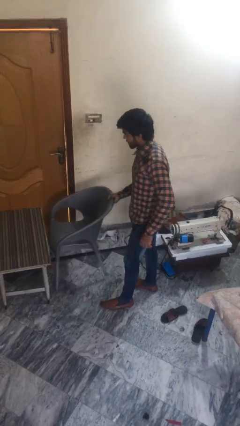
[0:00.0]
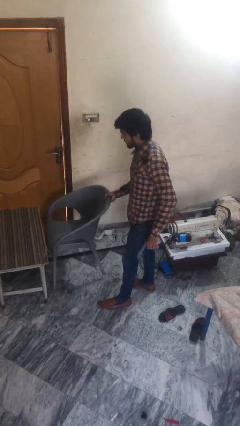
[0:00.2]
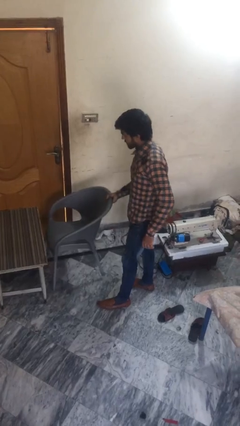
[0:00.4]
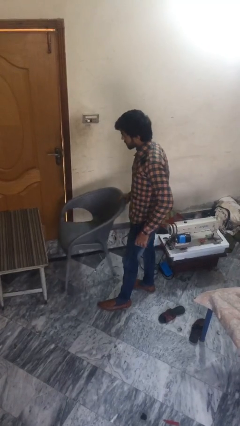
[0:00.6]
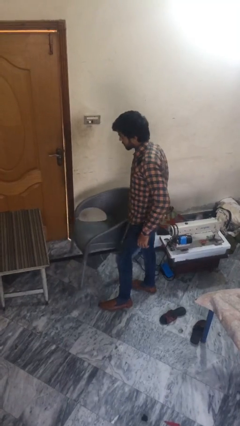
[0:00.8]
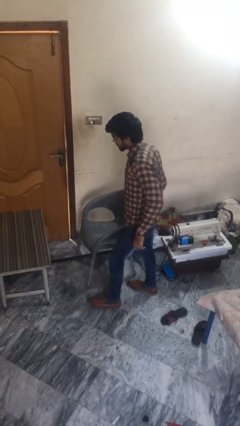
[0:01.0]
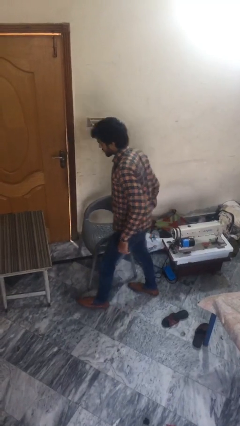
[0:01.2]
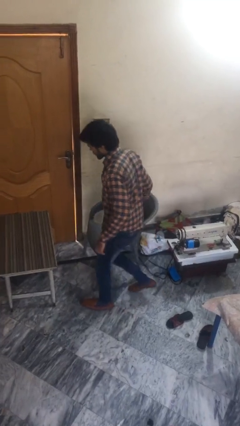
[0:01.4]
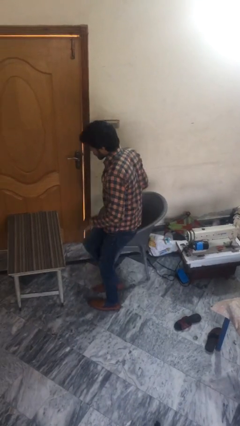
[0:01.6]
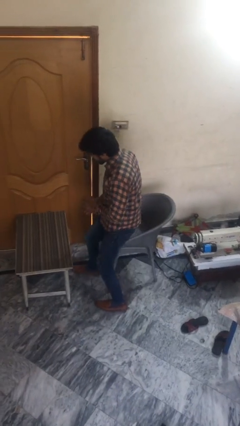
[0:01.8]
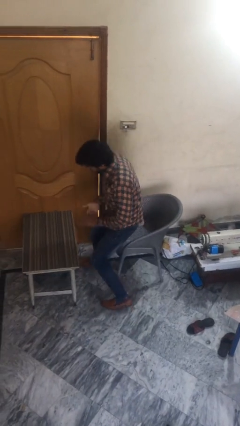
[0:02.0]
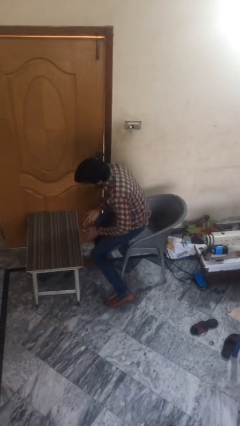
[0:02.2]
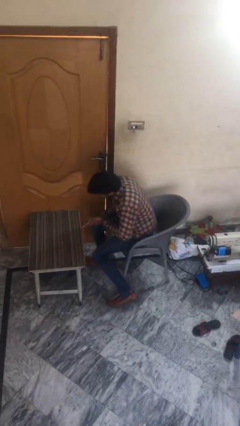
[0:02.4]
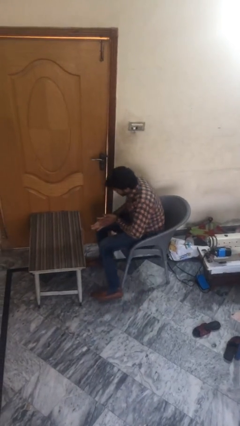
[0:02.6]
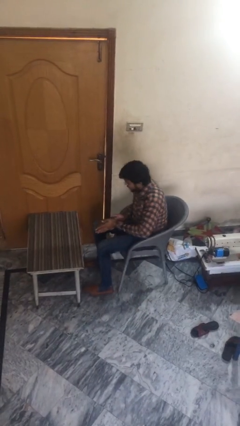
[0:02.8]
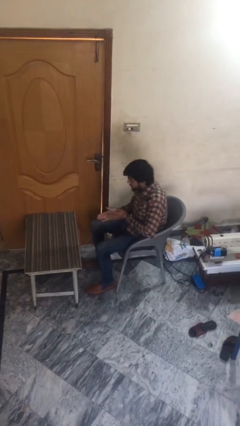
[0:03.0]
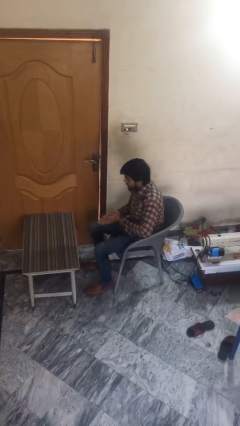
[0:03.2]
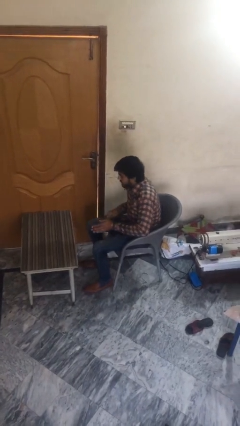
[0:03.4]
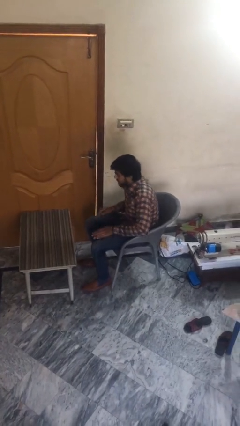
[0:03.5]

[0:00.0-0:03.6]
person sits down

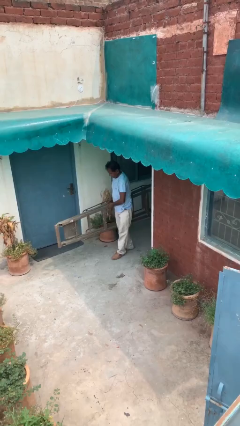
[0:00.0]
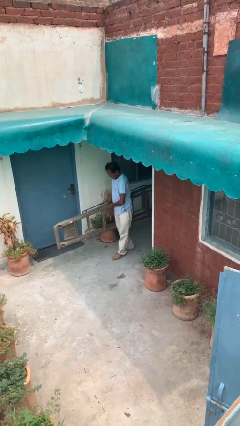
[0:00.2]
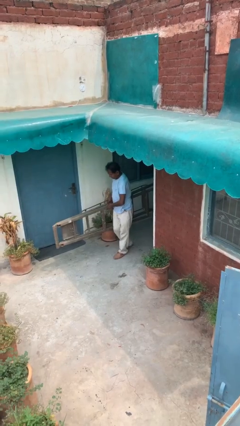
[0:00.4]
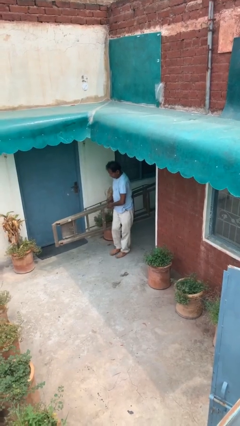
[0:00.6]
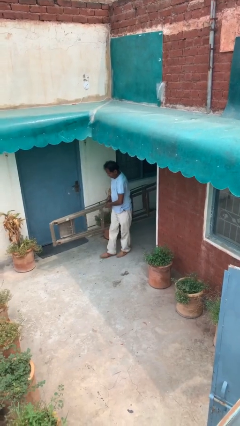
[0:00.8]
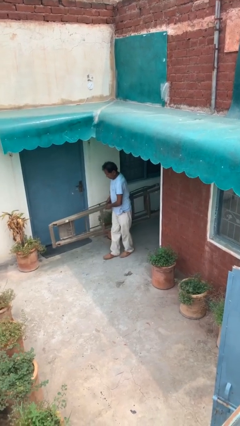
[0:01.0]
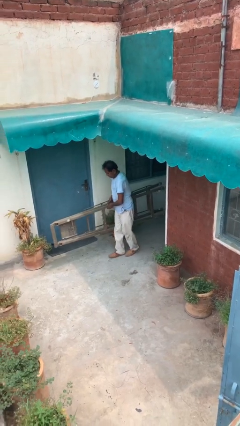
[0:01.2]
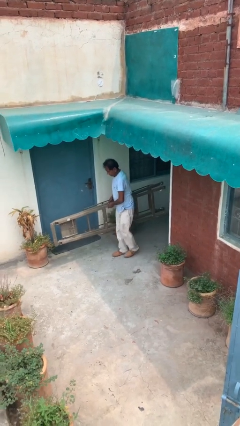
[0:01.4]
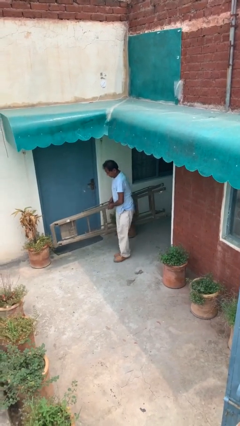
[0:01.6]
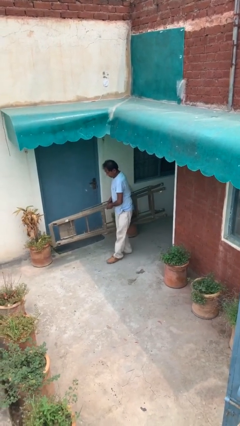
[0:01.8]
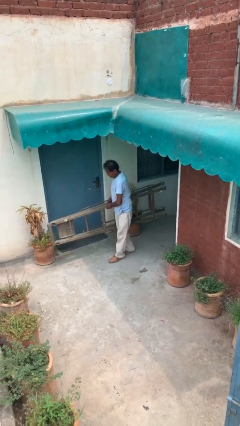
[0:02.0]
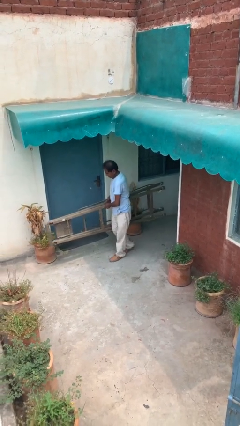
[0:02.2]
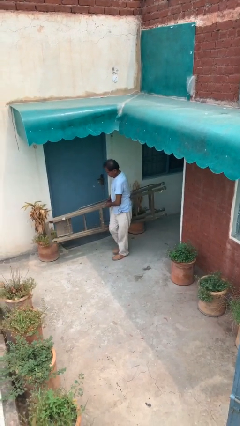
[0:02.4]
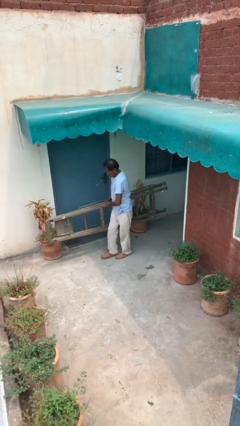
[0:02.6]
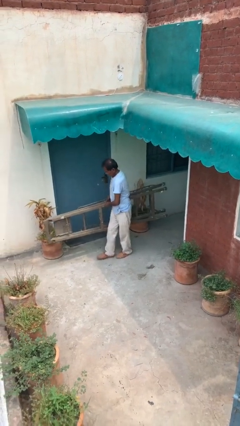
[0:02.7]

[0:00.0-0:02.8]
person carries heavy object

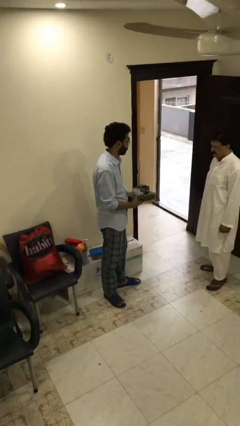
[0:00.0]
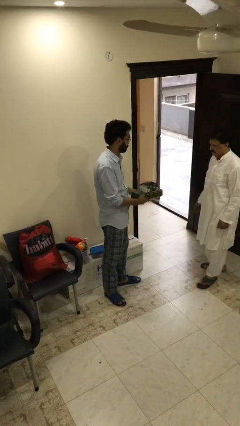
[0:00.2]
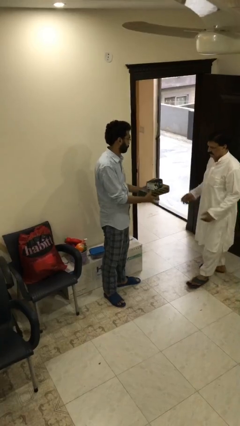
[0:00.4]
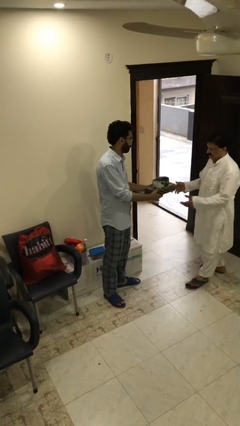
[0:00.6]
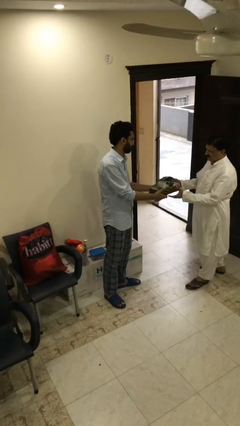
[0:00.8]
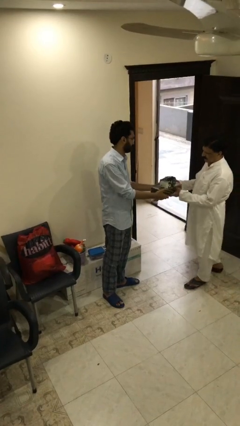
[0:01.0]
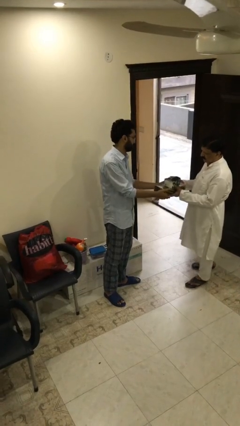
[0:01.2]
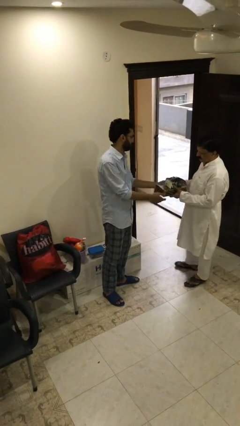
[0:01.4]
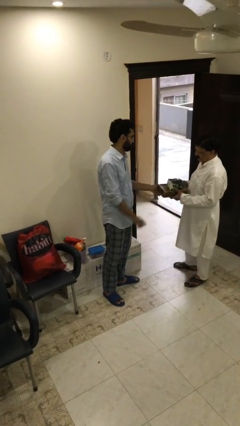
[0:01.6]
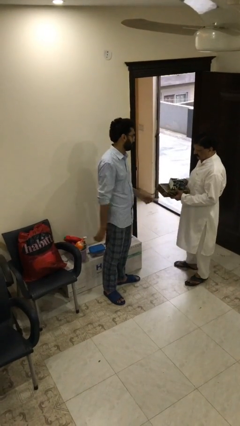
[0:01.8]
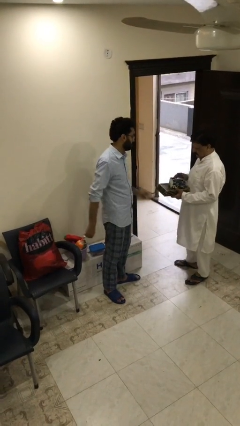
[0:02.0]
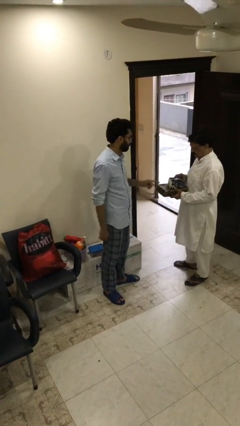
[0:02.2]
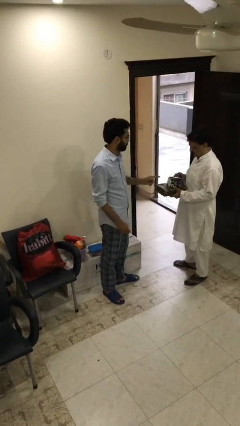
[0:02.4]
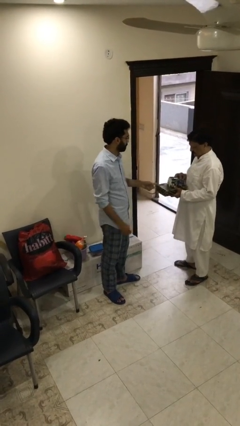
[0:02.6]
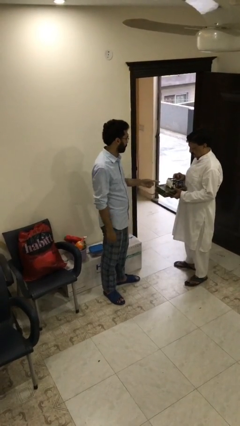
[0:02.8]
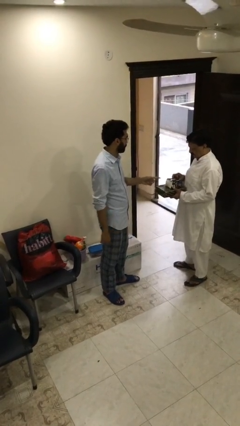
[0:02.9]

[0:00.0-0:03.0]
person transfers object to person

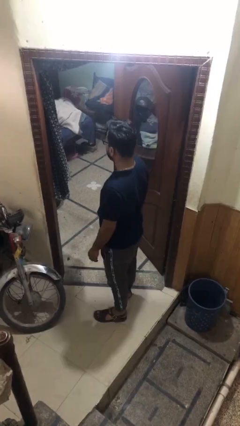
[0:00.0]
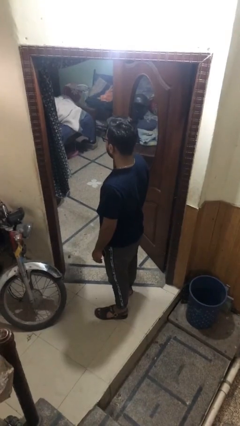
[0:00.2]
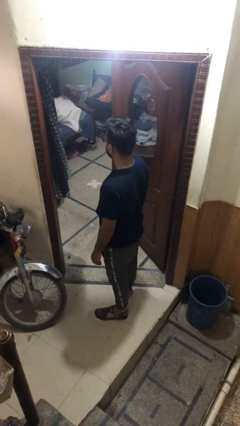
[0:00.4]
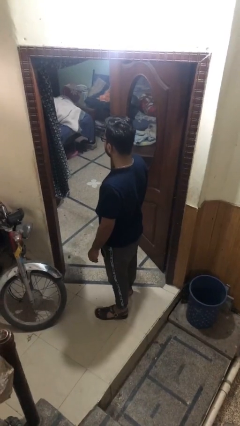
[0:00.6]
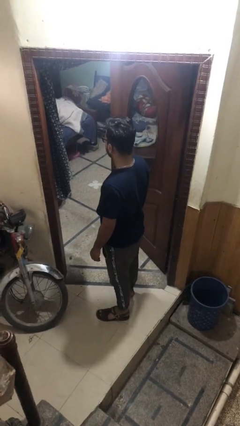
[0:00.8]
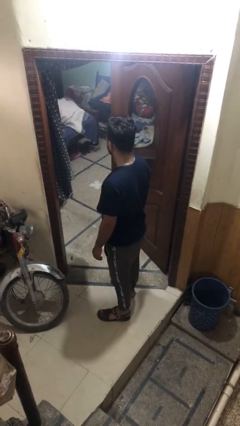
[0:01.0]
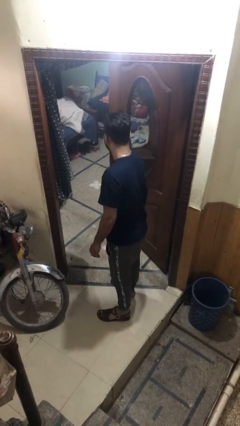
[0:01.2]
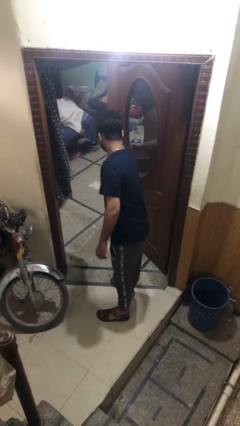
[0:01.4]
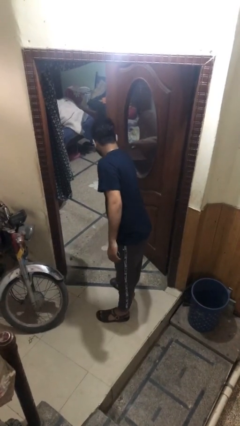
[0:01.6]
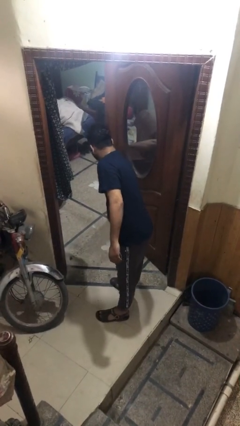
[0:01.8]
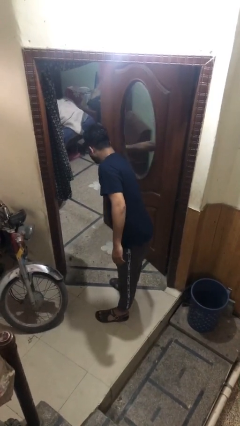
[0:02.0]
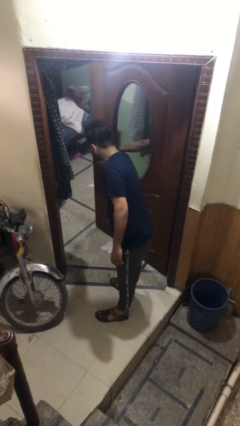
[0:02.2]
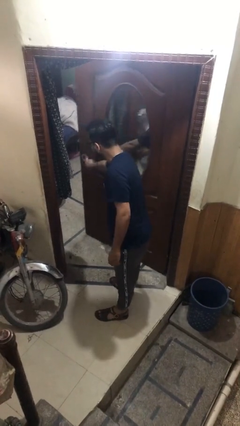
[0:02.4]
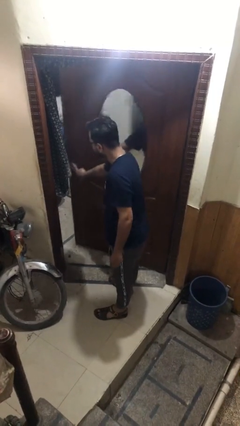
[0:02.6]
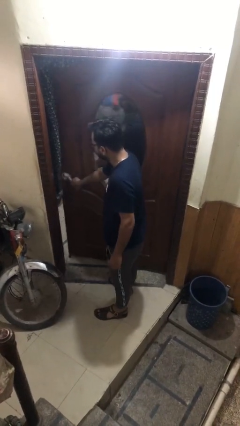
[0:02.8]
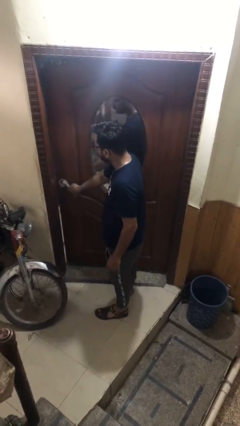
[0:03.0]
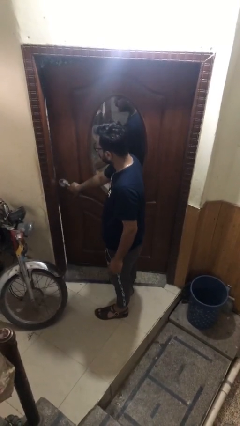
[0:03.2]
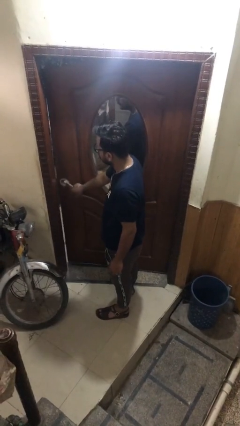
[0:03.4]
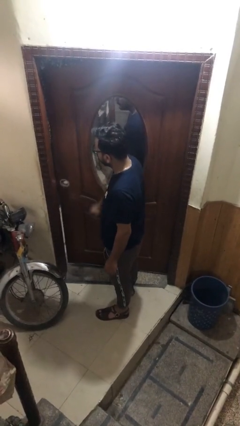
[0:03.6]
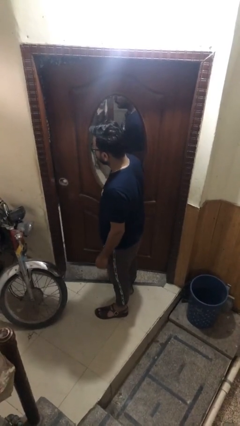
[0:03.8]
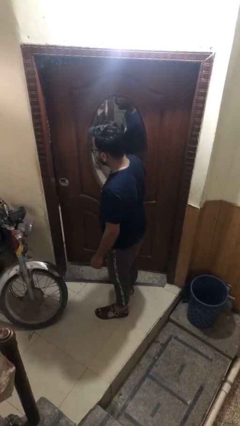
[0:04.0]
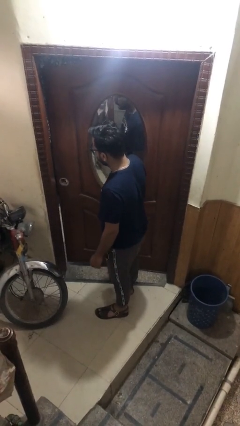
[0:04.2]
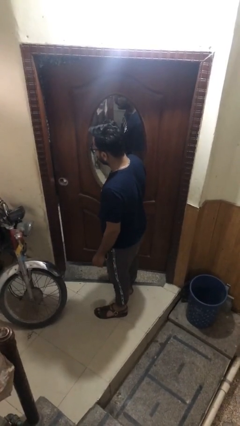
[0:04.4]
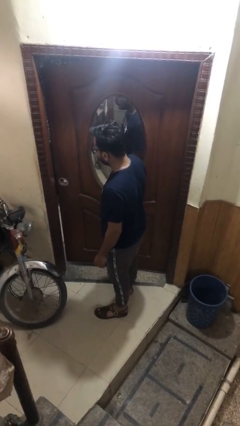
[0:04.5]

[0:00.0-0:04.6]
person closes facility door

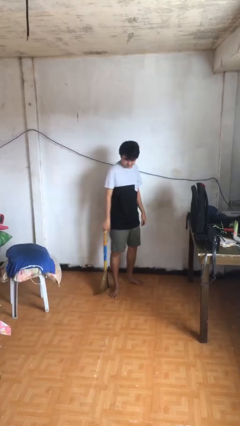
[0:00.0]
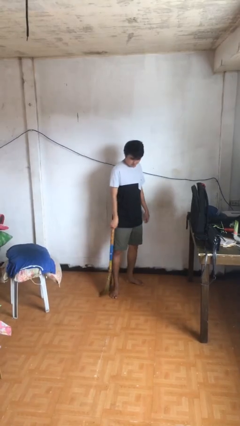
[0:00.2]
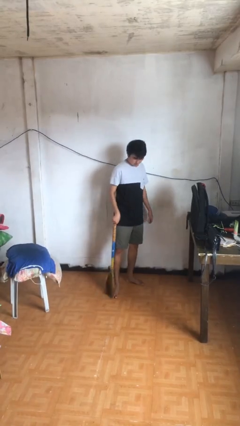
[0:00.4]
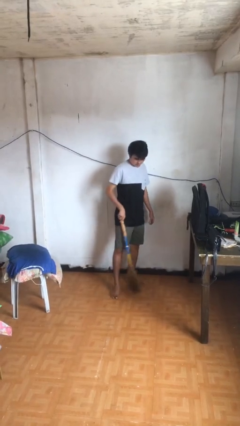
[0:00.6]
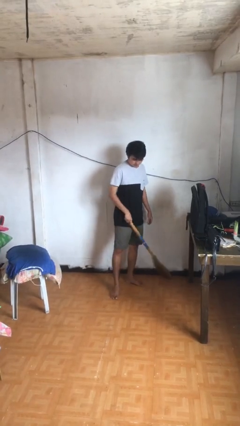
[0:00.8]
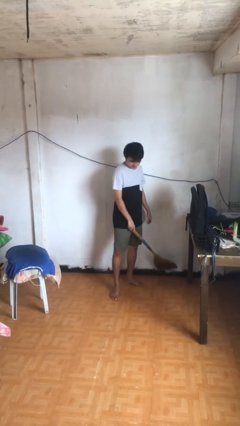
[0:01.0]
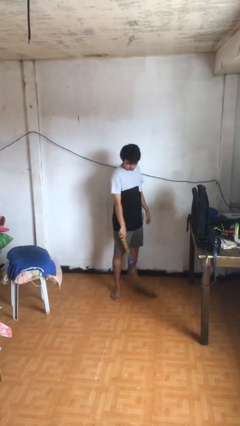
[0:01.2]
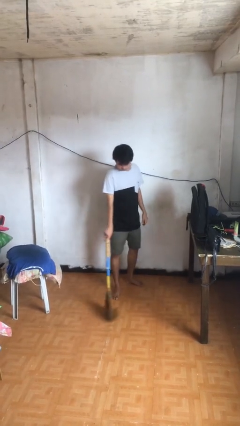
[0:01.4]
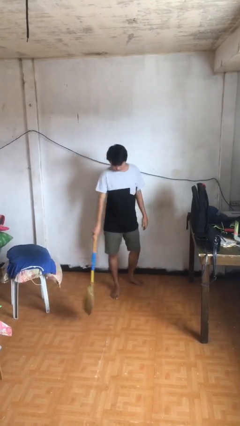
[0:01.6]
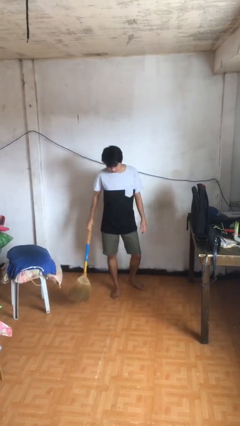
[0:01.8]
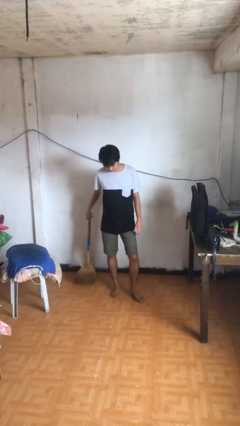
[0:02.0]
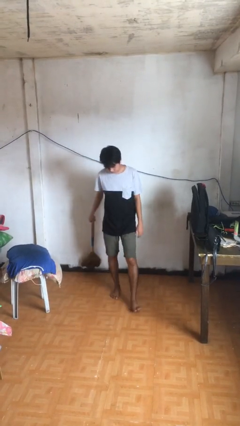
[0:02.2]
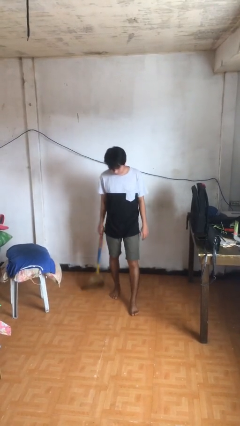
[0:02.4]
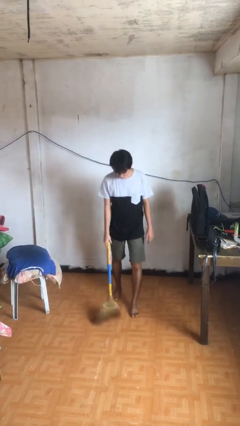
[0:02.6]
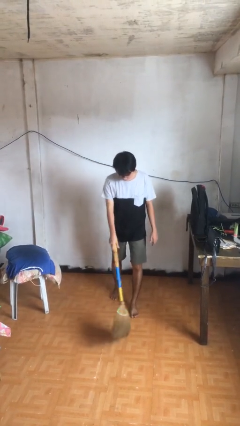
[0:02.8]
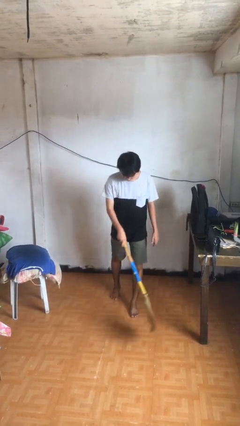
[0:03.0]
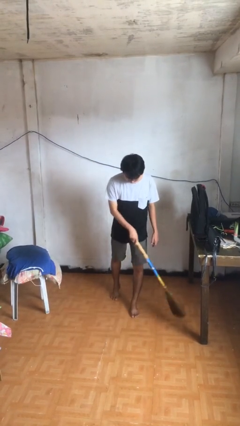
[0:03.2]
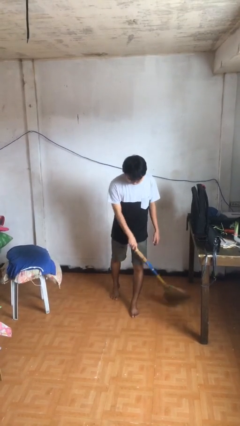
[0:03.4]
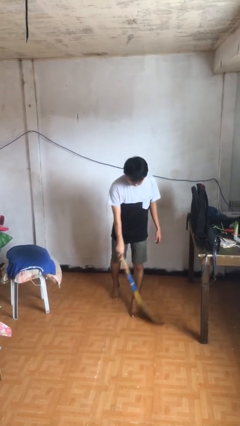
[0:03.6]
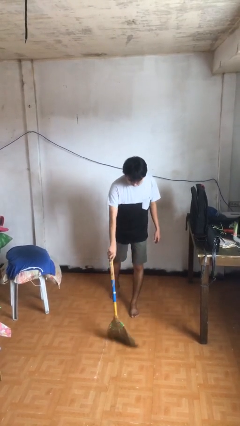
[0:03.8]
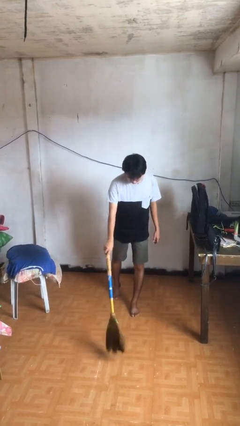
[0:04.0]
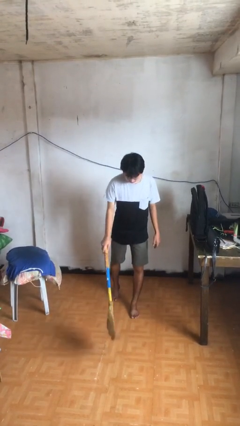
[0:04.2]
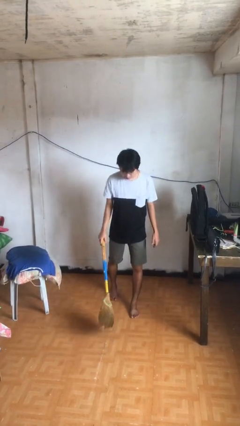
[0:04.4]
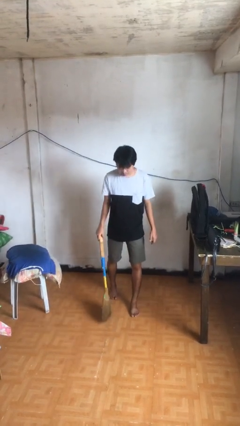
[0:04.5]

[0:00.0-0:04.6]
person sweeps floor
